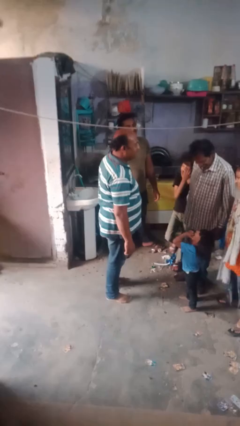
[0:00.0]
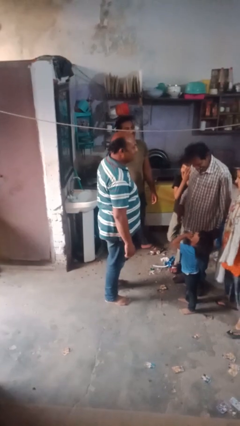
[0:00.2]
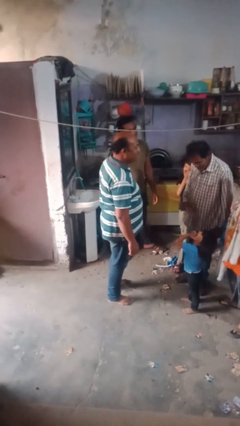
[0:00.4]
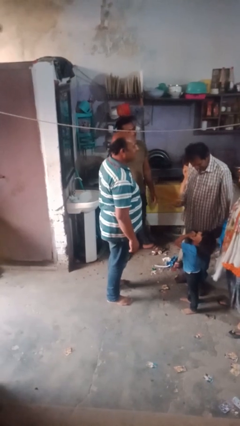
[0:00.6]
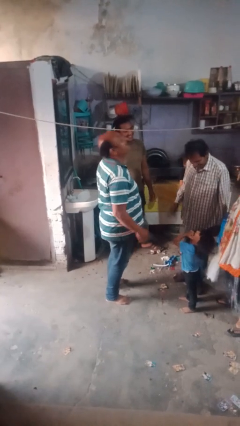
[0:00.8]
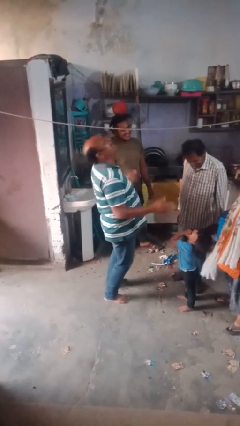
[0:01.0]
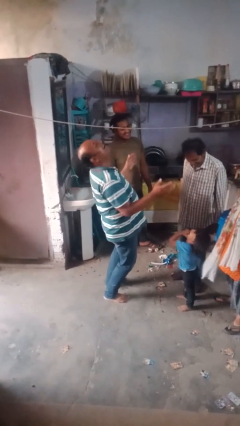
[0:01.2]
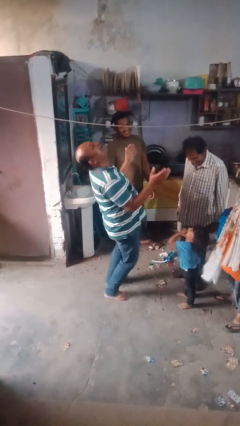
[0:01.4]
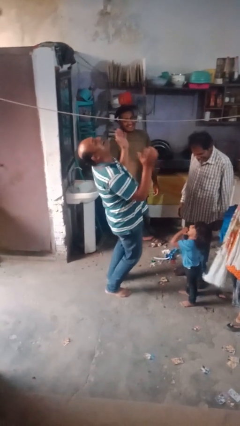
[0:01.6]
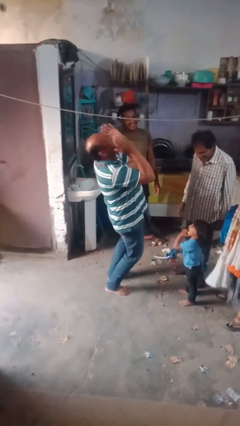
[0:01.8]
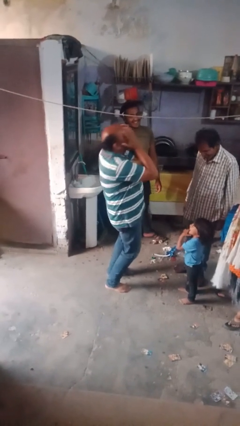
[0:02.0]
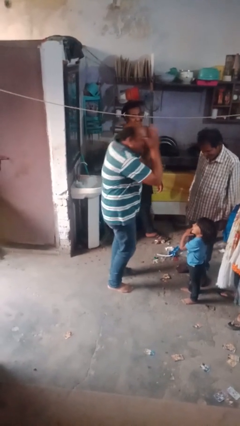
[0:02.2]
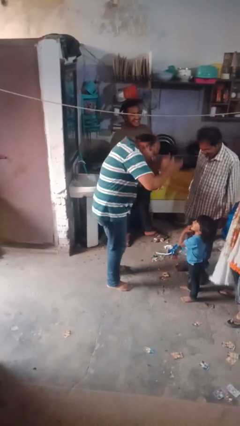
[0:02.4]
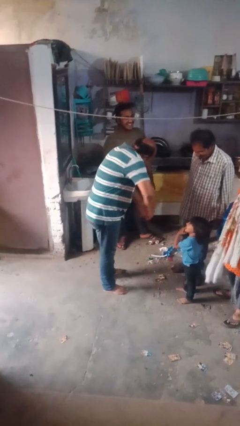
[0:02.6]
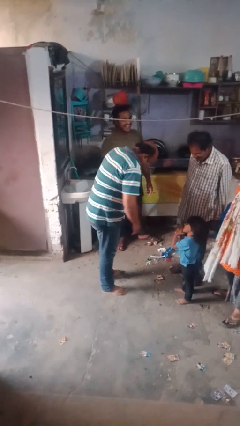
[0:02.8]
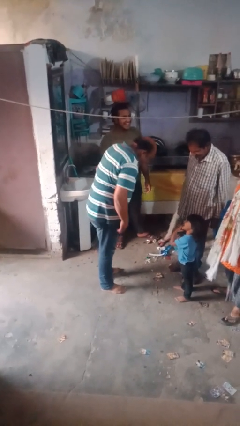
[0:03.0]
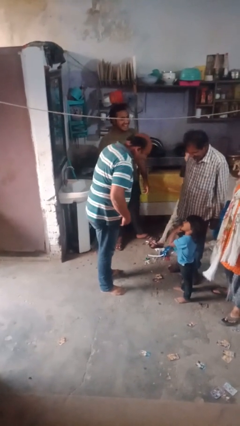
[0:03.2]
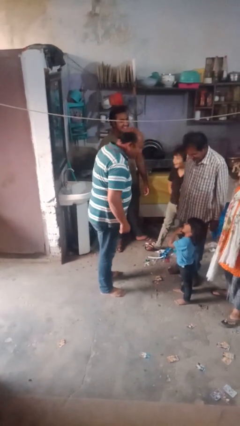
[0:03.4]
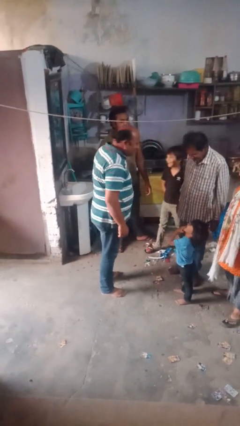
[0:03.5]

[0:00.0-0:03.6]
person laughs with person

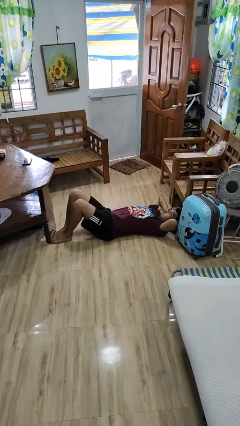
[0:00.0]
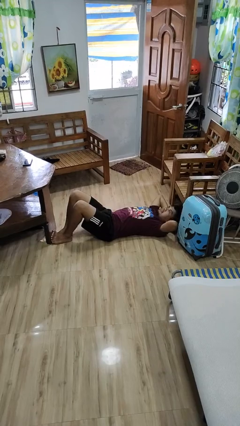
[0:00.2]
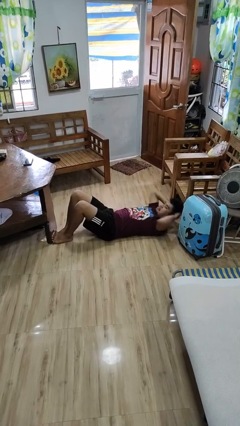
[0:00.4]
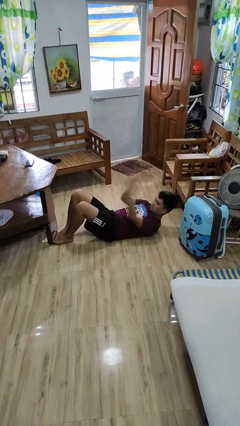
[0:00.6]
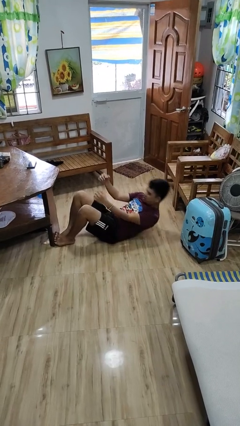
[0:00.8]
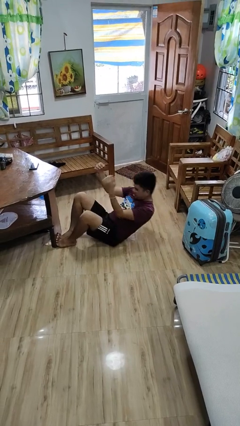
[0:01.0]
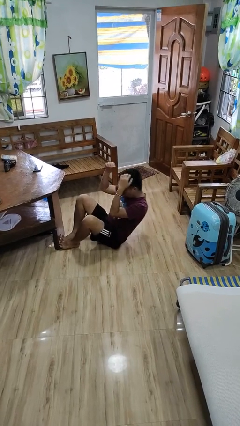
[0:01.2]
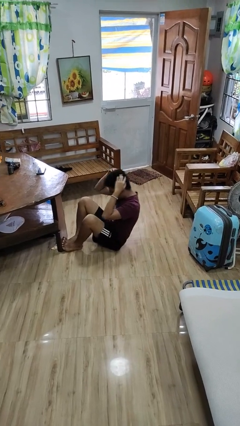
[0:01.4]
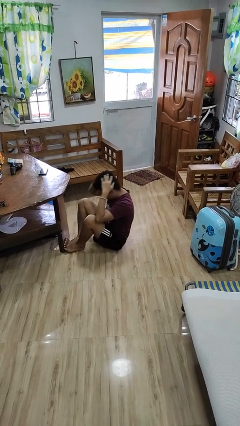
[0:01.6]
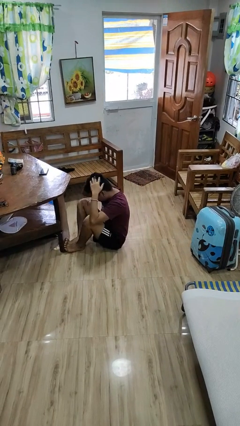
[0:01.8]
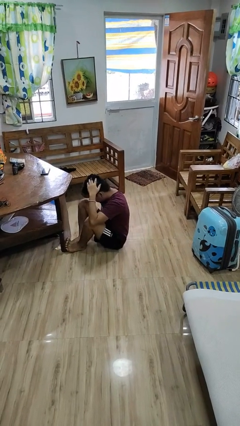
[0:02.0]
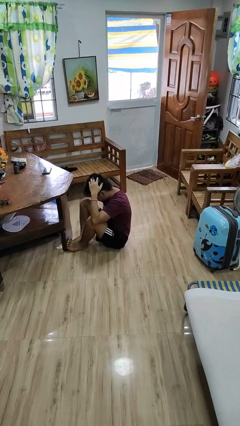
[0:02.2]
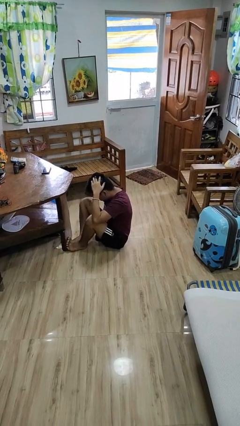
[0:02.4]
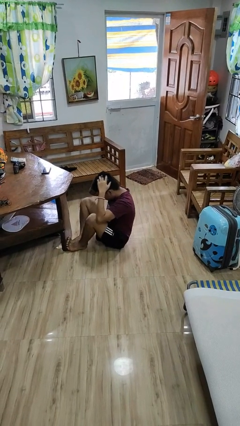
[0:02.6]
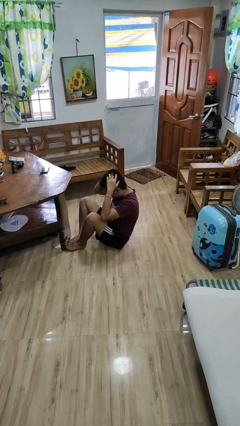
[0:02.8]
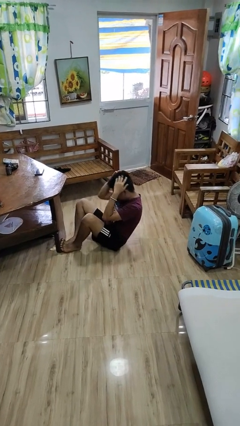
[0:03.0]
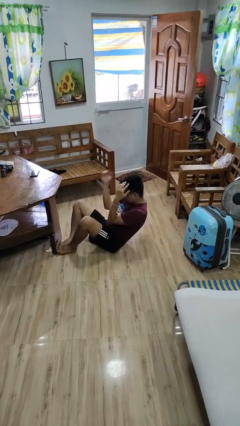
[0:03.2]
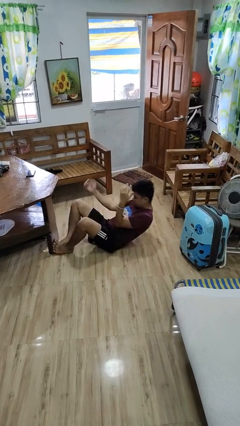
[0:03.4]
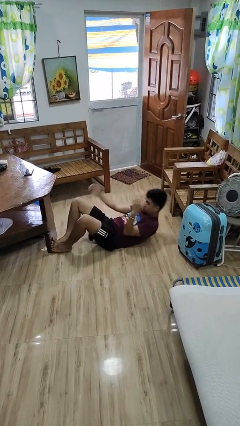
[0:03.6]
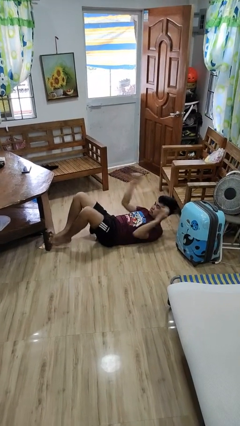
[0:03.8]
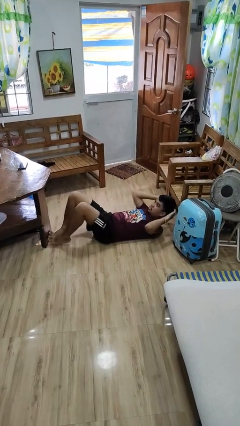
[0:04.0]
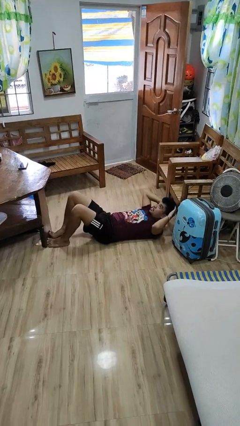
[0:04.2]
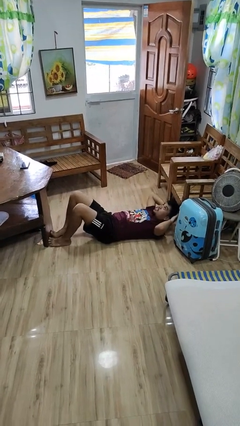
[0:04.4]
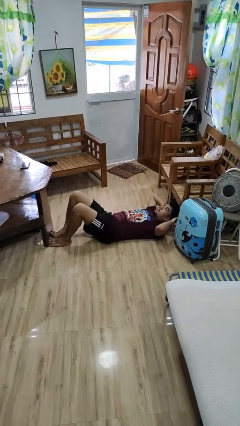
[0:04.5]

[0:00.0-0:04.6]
person exercises with situp

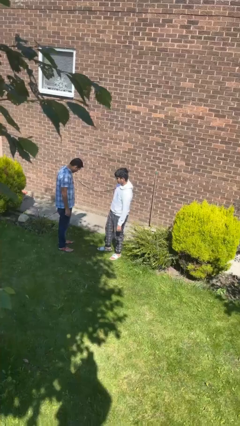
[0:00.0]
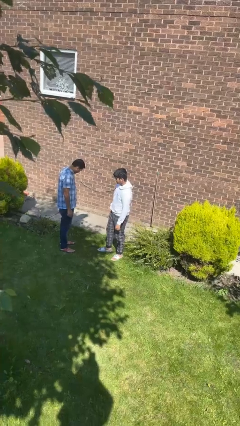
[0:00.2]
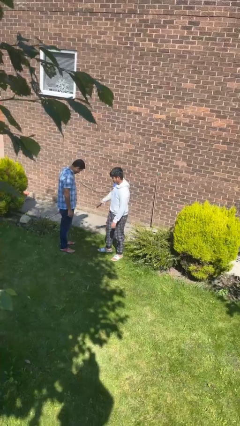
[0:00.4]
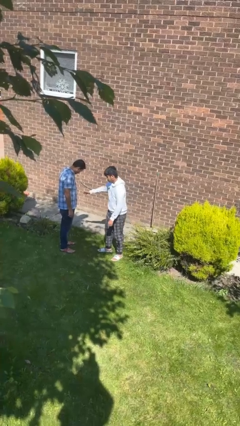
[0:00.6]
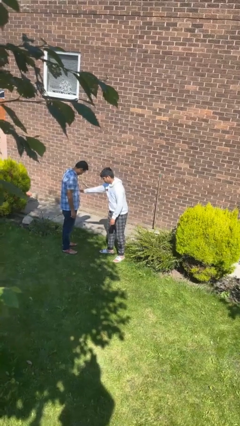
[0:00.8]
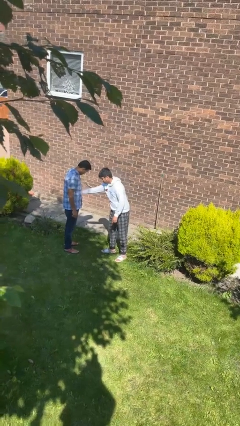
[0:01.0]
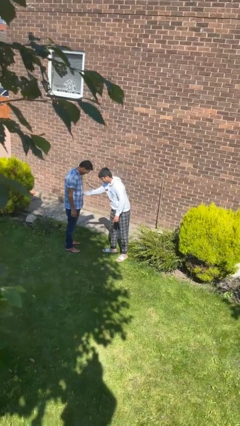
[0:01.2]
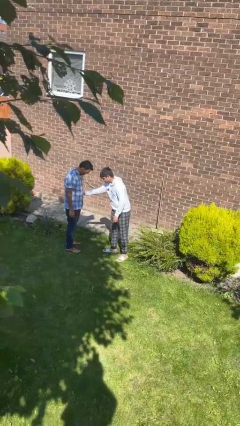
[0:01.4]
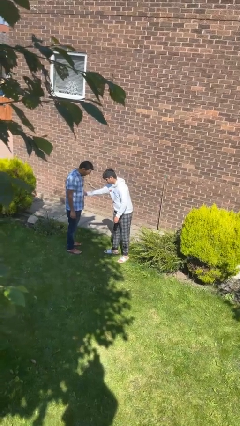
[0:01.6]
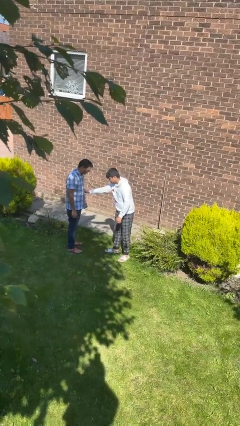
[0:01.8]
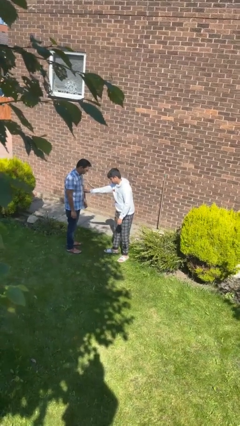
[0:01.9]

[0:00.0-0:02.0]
person grabs person by forearm

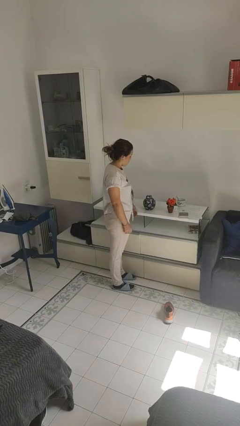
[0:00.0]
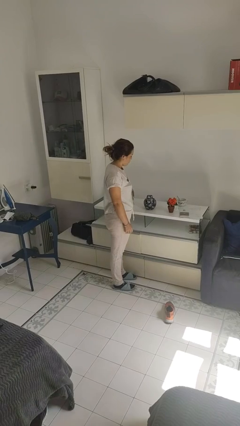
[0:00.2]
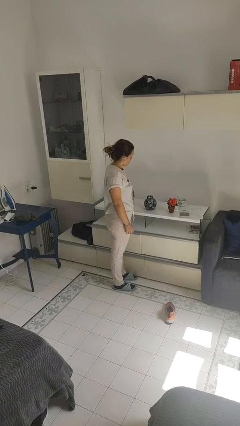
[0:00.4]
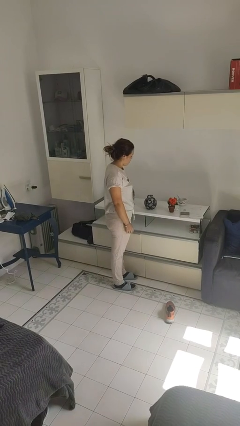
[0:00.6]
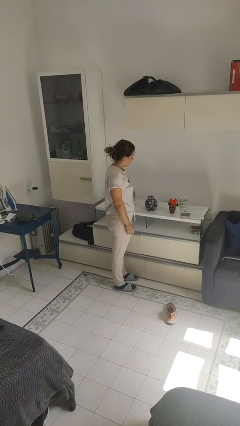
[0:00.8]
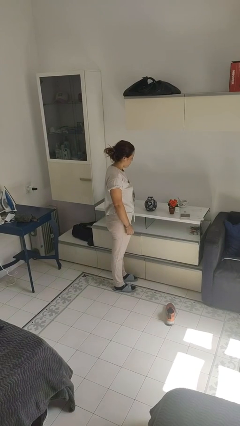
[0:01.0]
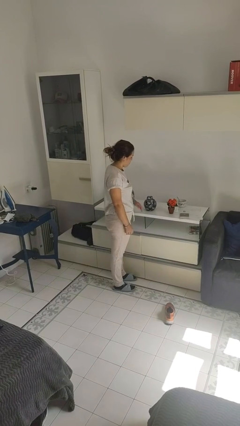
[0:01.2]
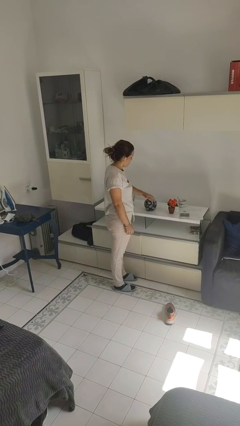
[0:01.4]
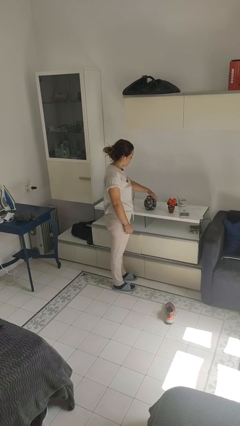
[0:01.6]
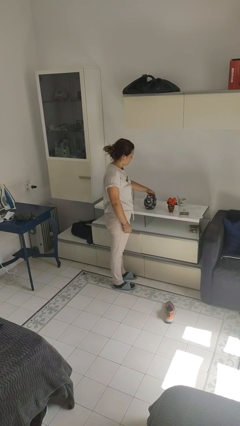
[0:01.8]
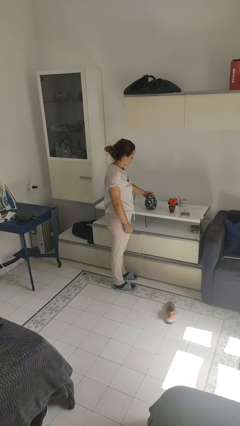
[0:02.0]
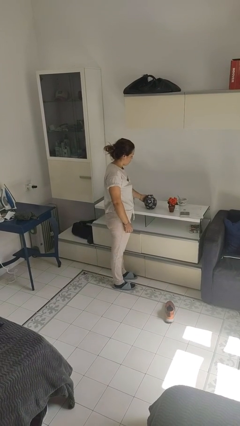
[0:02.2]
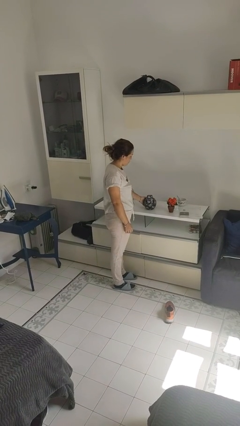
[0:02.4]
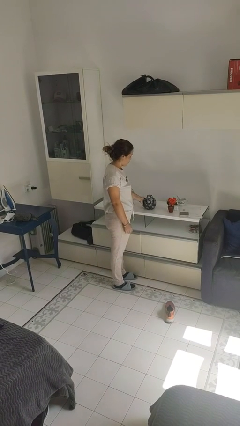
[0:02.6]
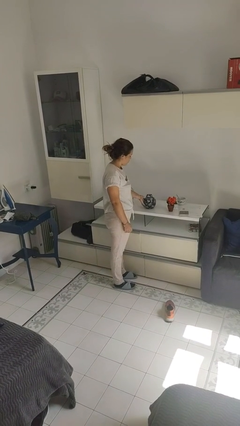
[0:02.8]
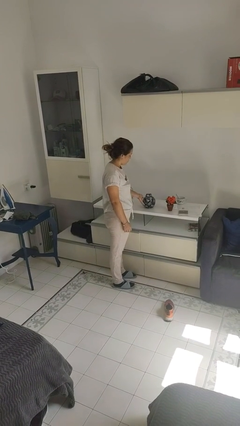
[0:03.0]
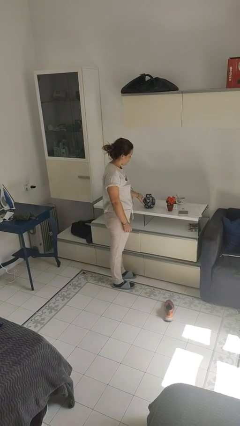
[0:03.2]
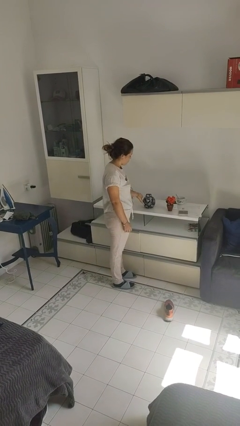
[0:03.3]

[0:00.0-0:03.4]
person waves hand over object

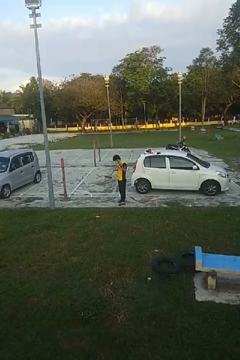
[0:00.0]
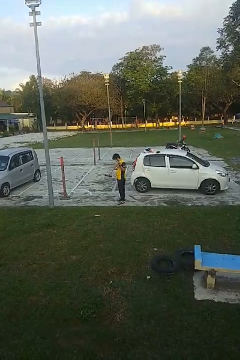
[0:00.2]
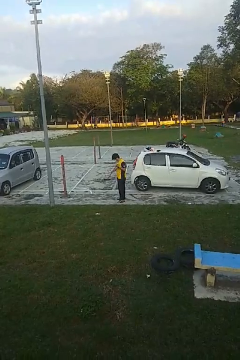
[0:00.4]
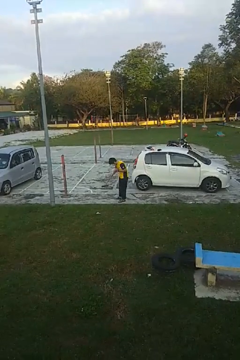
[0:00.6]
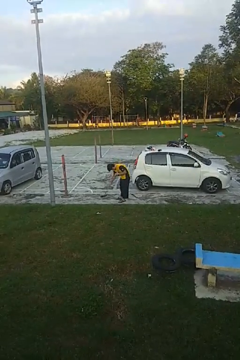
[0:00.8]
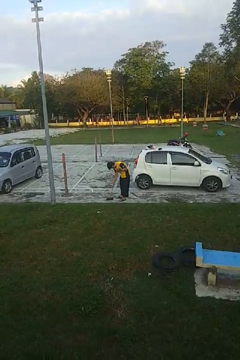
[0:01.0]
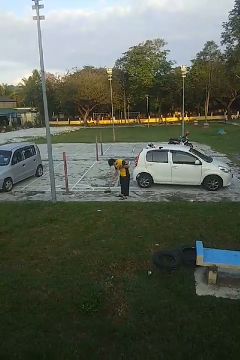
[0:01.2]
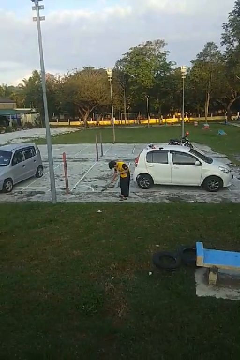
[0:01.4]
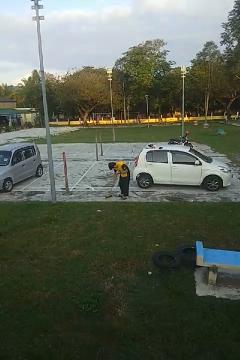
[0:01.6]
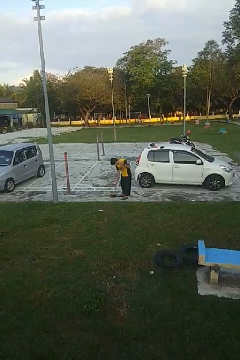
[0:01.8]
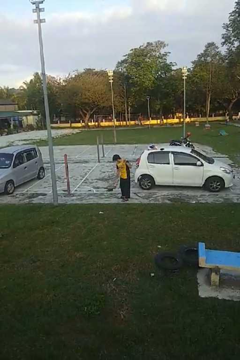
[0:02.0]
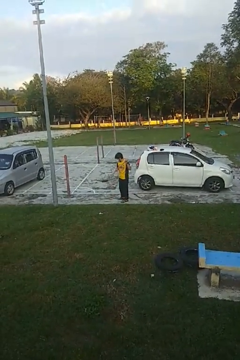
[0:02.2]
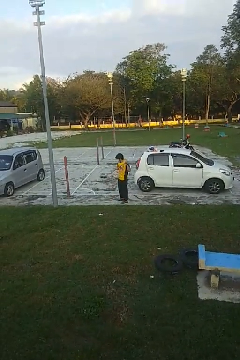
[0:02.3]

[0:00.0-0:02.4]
person sweeps floor

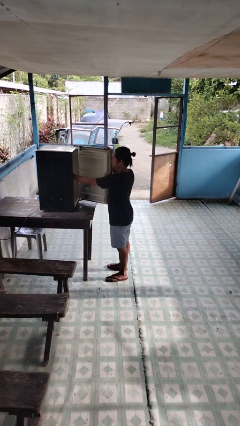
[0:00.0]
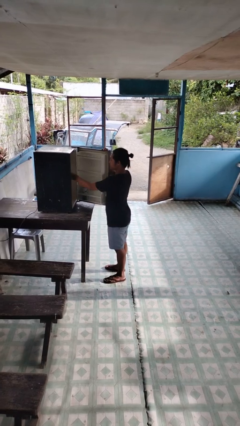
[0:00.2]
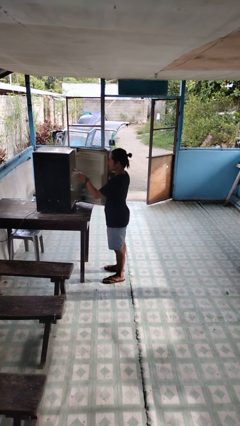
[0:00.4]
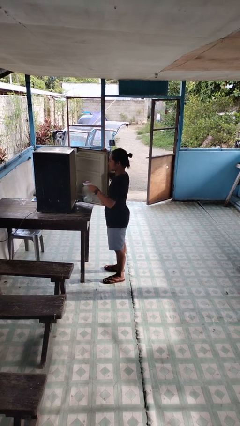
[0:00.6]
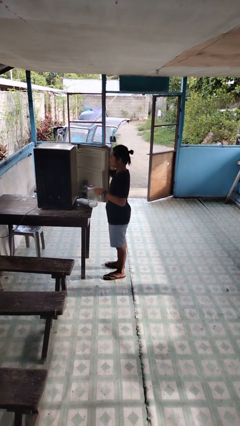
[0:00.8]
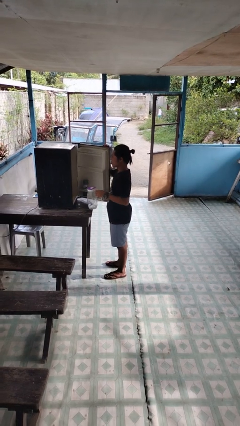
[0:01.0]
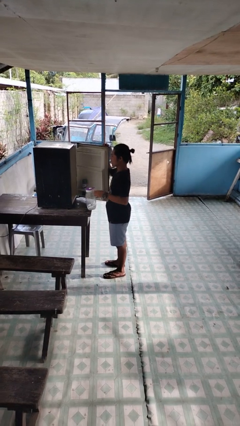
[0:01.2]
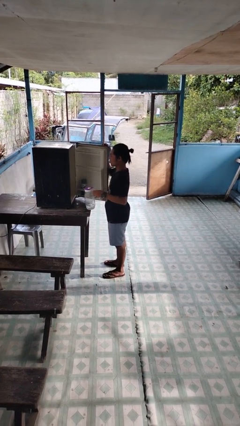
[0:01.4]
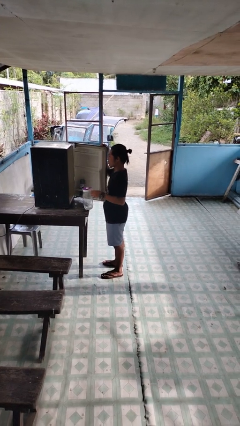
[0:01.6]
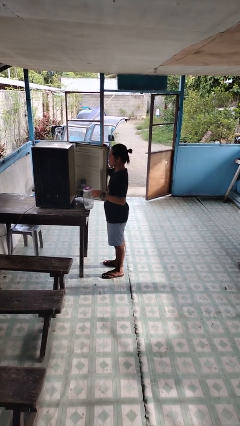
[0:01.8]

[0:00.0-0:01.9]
person takes object from refrigerator

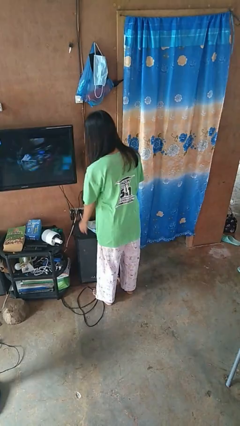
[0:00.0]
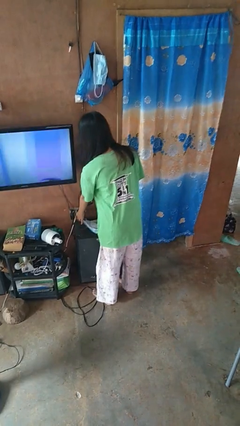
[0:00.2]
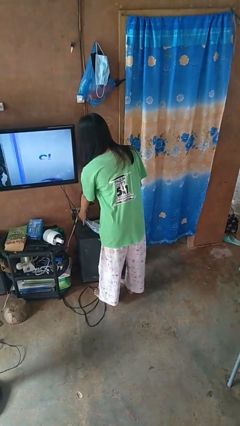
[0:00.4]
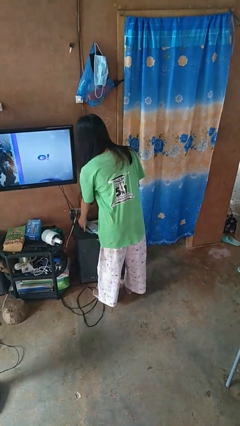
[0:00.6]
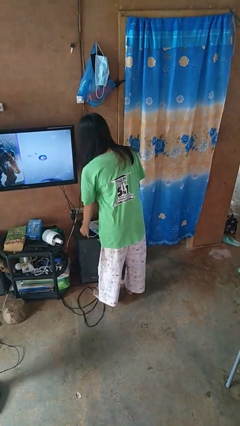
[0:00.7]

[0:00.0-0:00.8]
person unplugs from electrical socket
